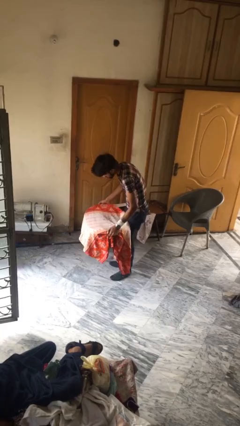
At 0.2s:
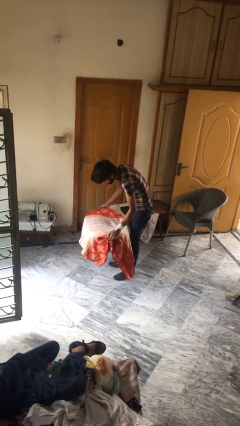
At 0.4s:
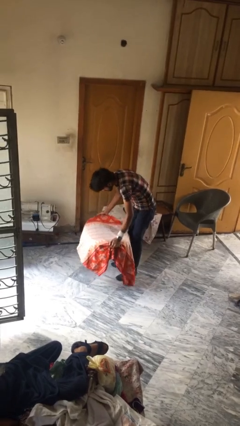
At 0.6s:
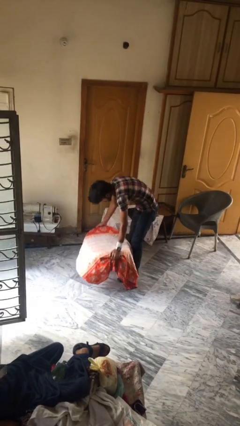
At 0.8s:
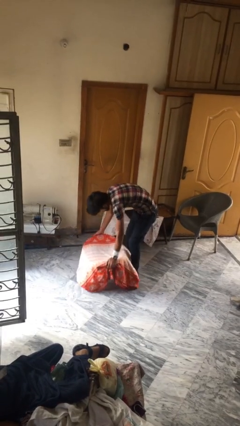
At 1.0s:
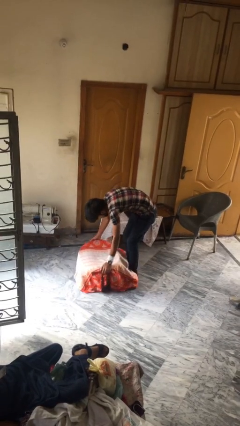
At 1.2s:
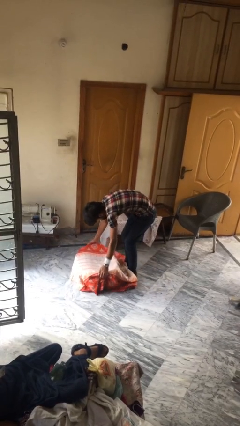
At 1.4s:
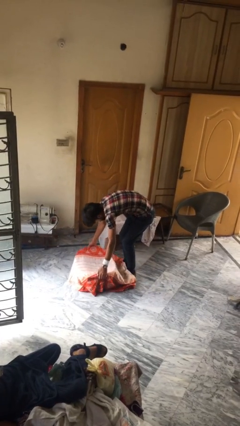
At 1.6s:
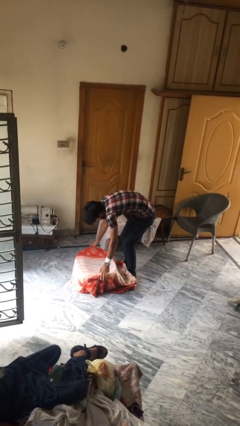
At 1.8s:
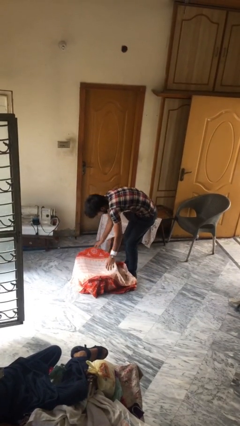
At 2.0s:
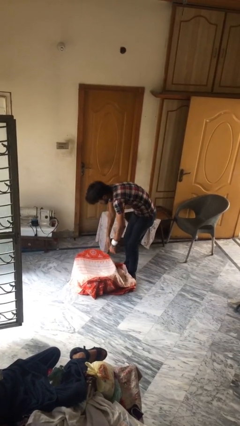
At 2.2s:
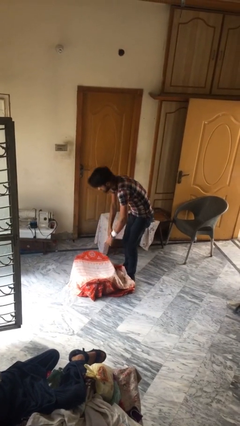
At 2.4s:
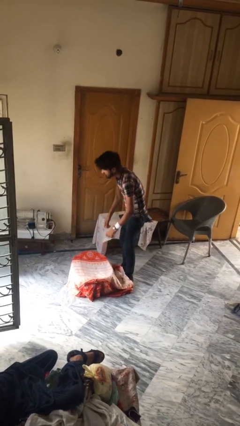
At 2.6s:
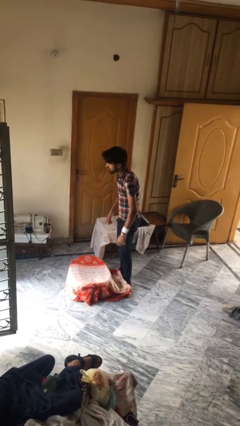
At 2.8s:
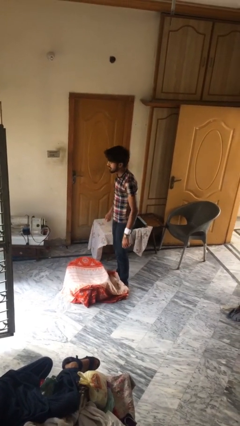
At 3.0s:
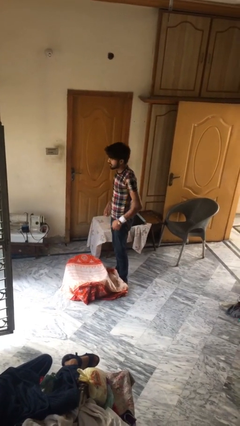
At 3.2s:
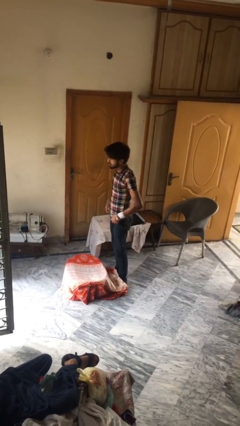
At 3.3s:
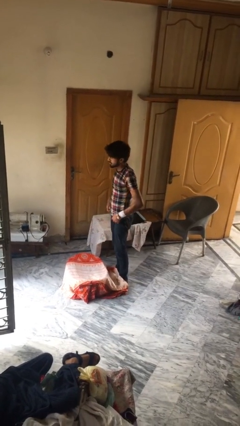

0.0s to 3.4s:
person puts down object on floor

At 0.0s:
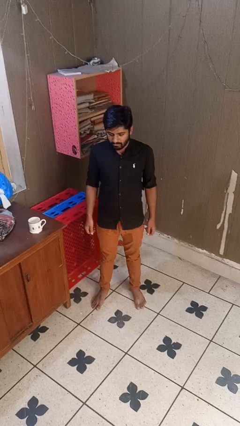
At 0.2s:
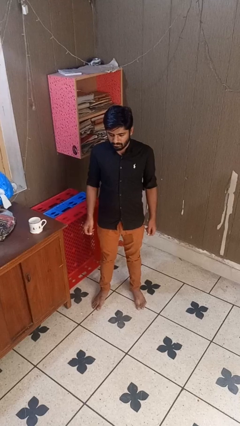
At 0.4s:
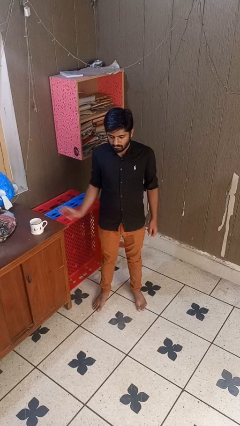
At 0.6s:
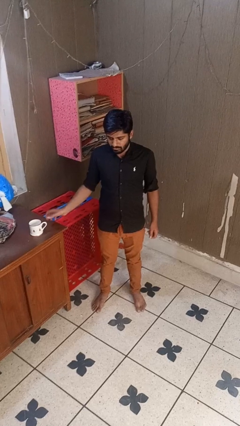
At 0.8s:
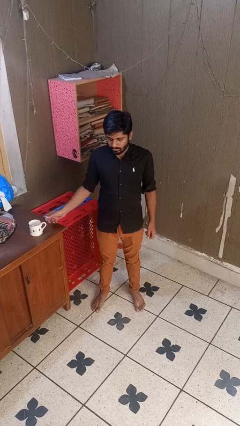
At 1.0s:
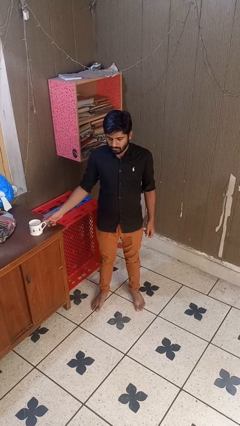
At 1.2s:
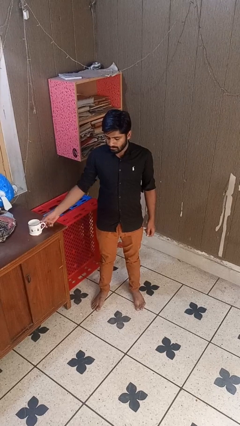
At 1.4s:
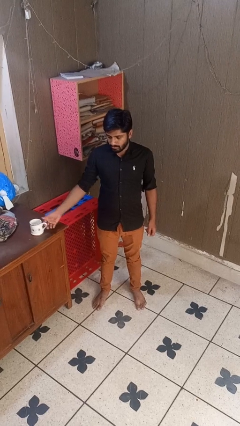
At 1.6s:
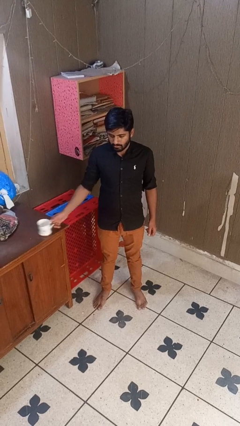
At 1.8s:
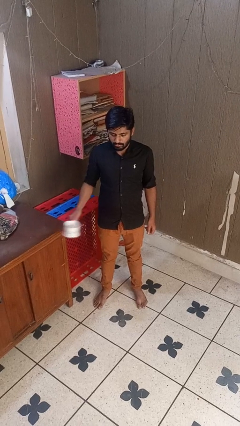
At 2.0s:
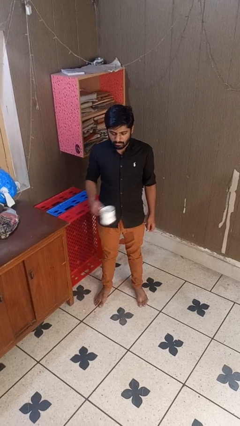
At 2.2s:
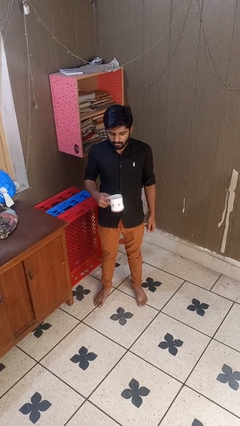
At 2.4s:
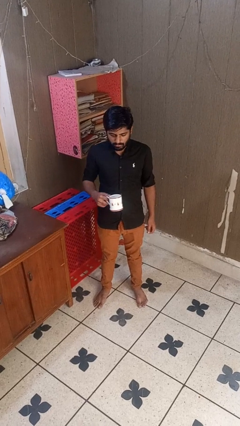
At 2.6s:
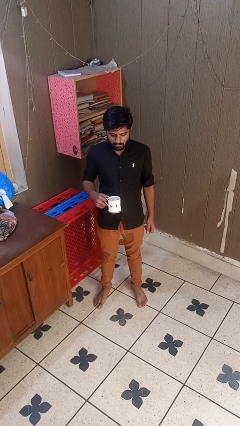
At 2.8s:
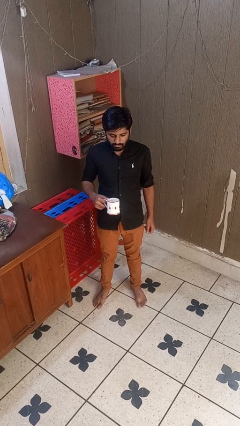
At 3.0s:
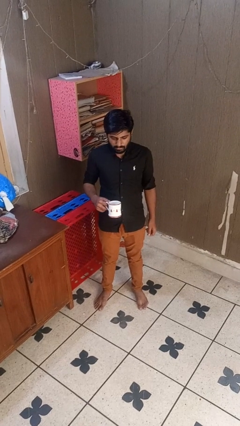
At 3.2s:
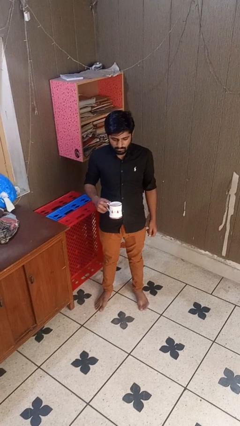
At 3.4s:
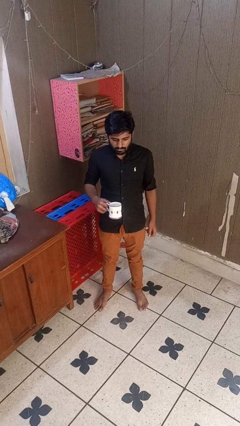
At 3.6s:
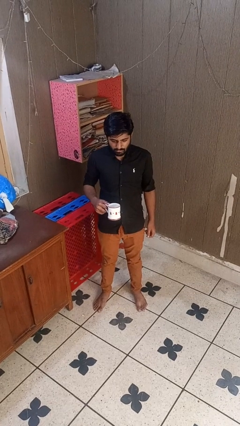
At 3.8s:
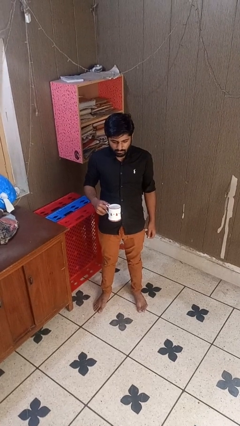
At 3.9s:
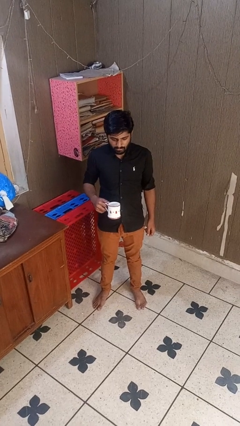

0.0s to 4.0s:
person picks up object from table

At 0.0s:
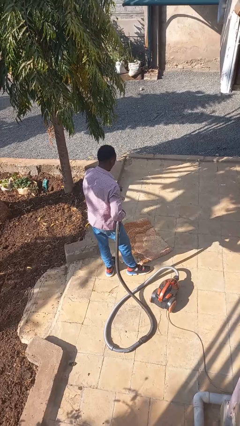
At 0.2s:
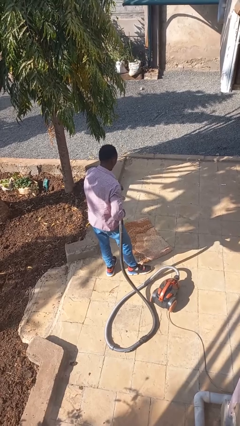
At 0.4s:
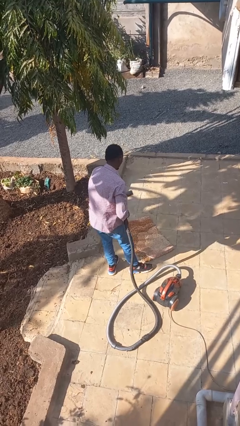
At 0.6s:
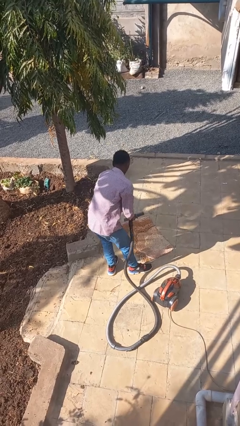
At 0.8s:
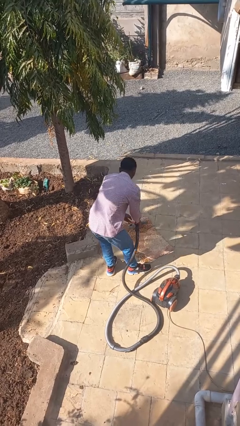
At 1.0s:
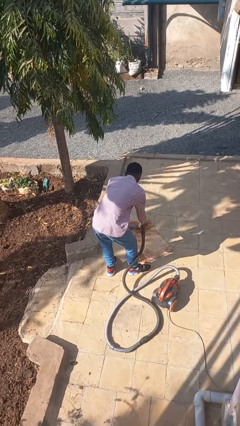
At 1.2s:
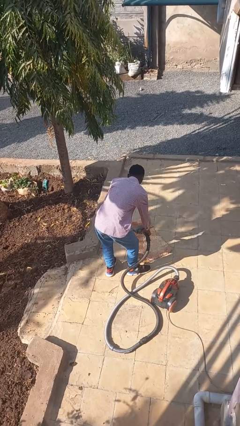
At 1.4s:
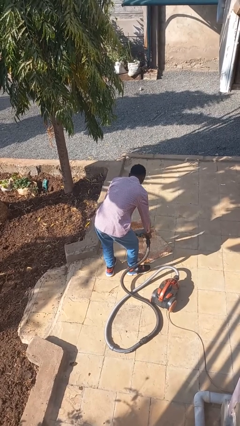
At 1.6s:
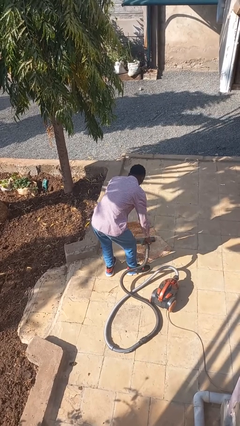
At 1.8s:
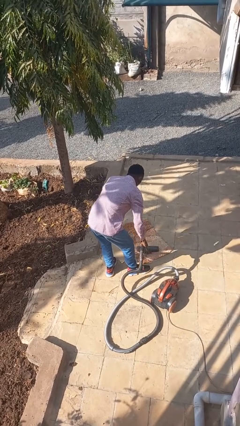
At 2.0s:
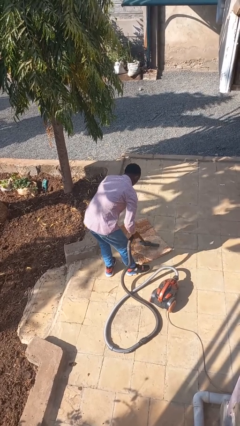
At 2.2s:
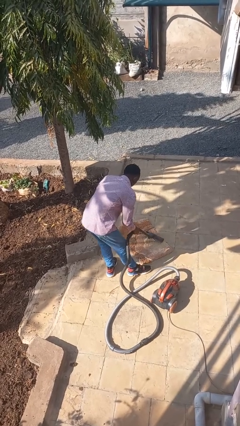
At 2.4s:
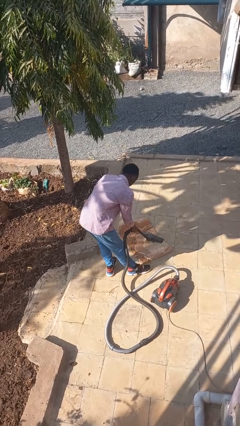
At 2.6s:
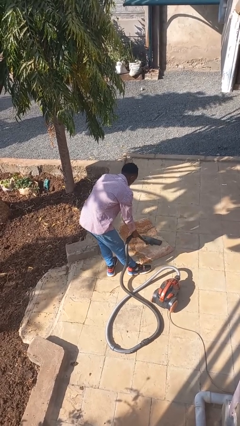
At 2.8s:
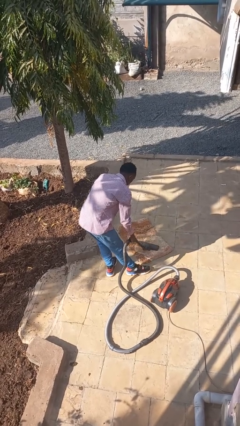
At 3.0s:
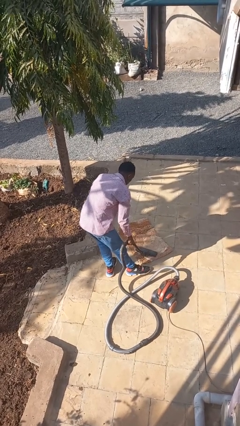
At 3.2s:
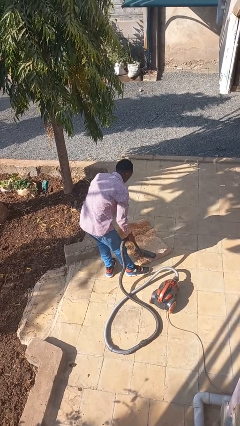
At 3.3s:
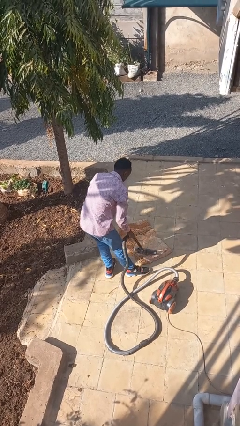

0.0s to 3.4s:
person vacuums carpet

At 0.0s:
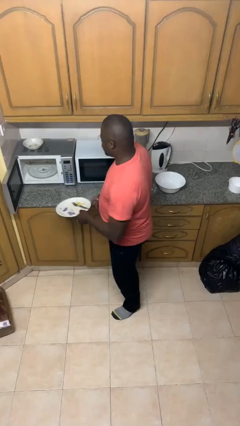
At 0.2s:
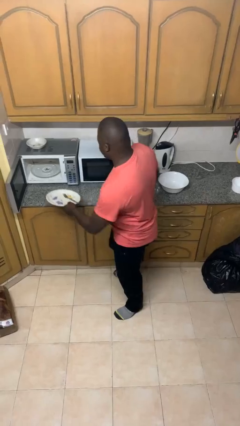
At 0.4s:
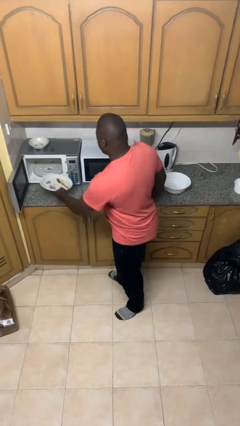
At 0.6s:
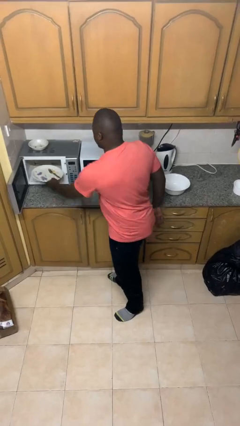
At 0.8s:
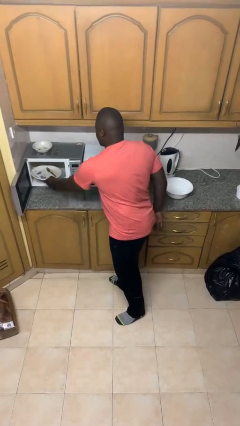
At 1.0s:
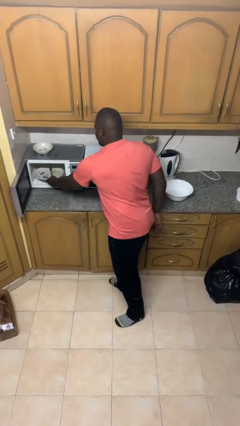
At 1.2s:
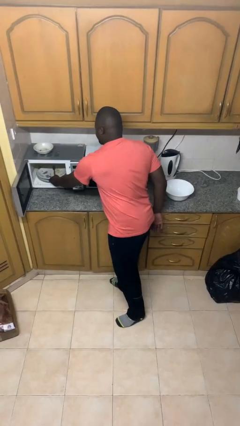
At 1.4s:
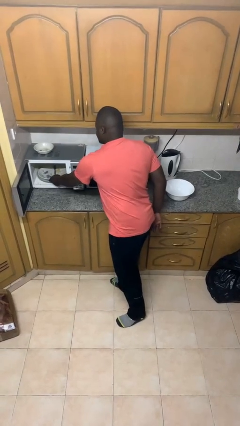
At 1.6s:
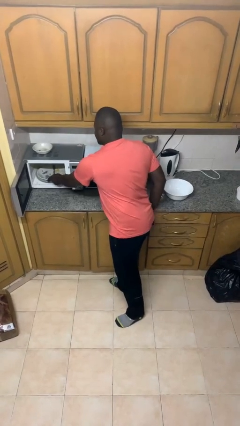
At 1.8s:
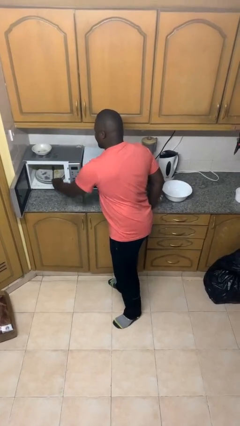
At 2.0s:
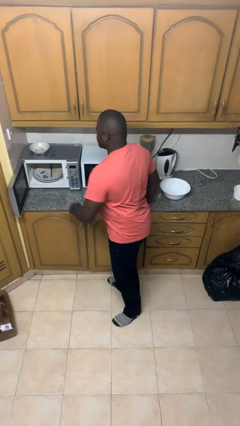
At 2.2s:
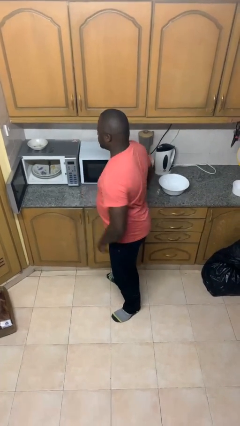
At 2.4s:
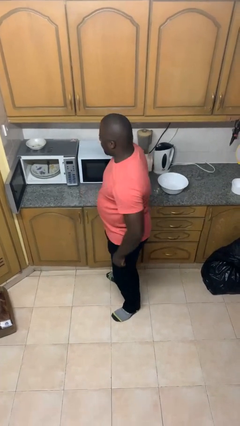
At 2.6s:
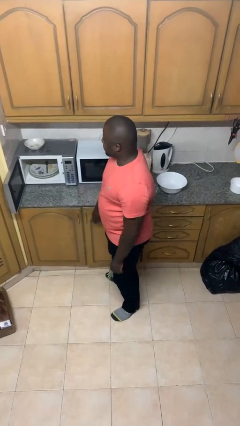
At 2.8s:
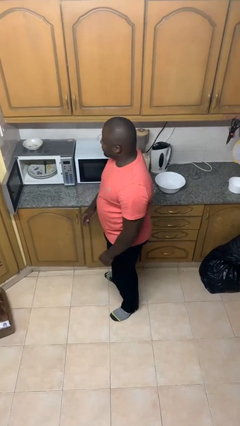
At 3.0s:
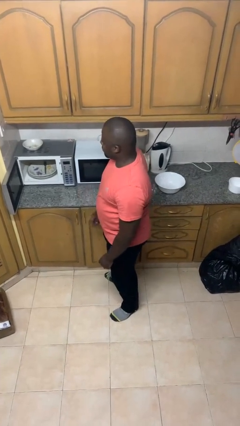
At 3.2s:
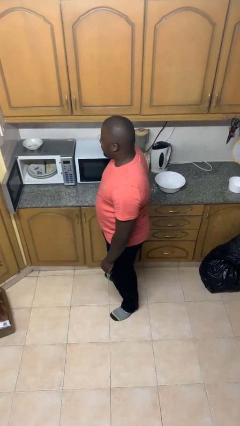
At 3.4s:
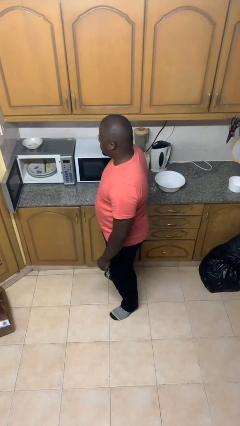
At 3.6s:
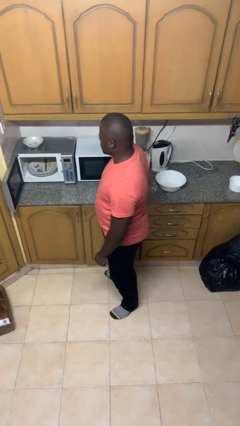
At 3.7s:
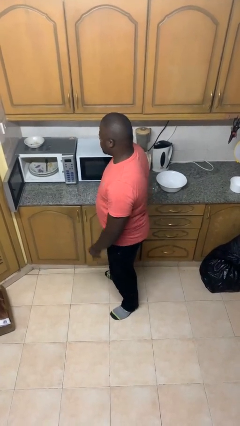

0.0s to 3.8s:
person puts object into microwave

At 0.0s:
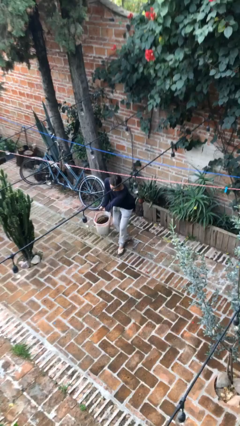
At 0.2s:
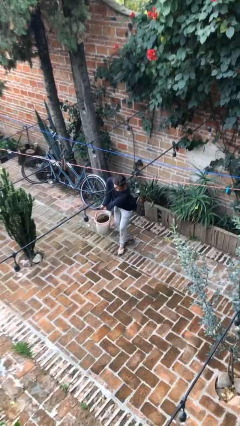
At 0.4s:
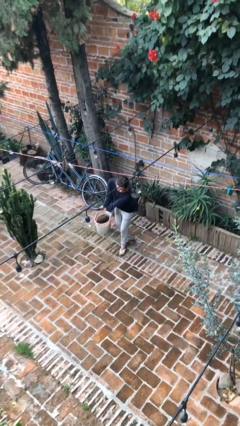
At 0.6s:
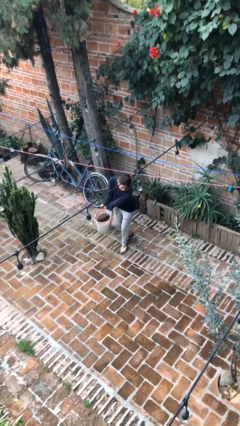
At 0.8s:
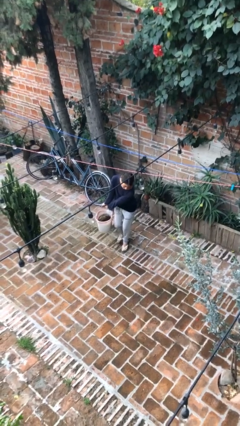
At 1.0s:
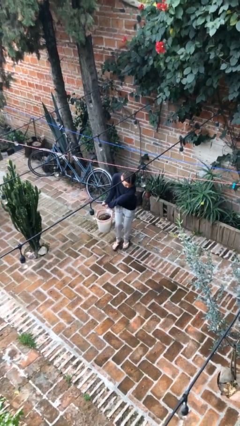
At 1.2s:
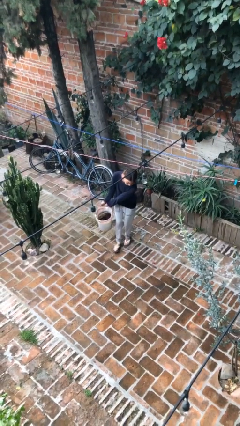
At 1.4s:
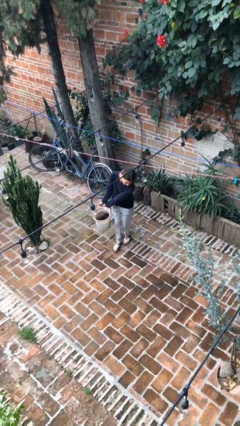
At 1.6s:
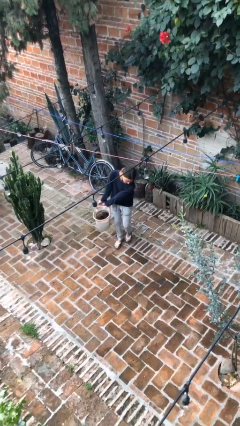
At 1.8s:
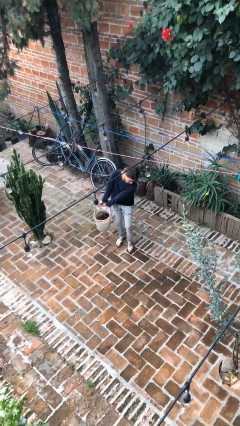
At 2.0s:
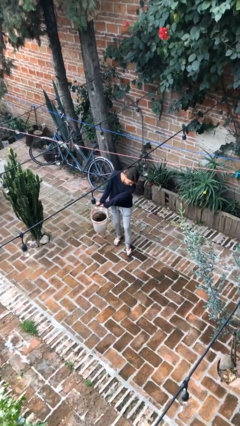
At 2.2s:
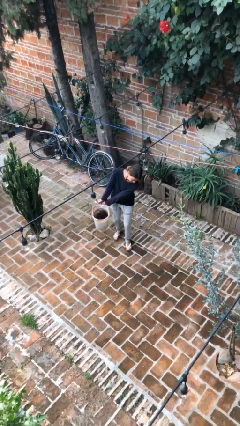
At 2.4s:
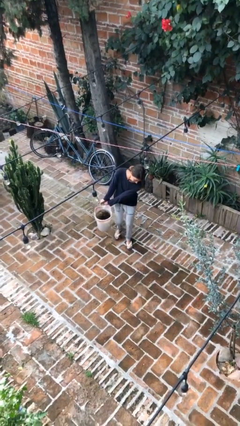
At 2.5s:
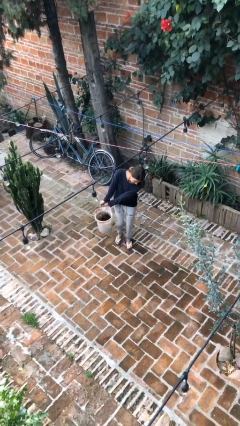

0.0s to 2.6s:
person carries heavy object

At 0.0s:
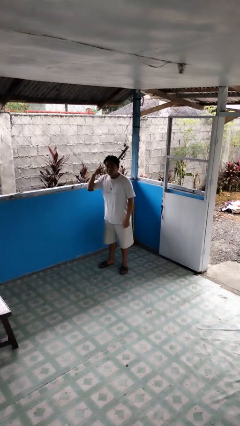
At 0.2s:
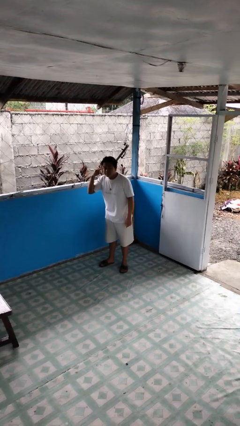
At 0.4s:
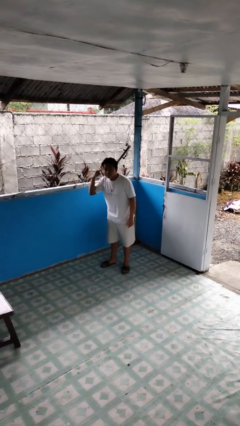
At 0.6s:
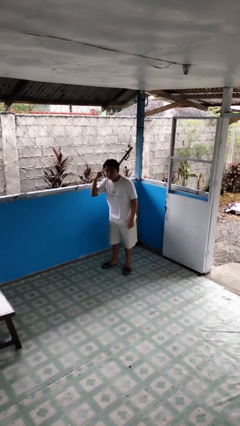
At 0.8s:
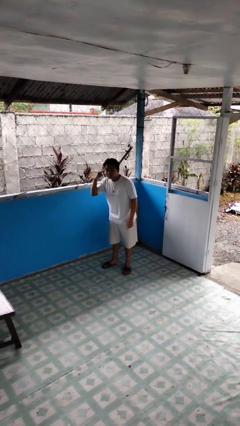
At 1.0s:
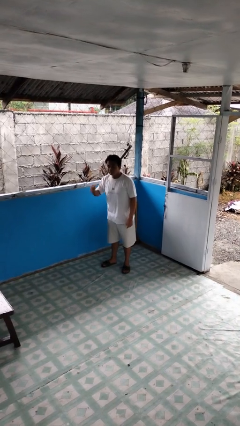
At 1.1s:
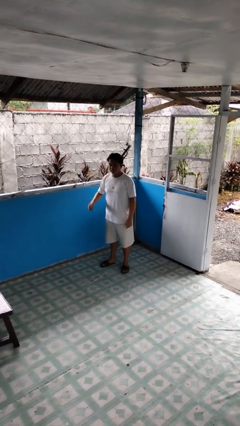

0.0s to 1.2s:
person gestures listen closely
